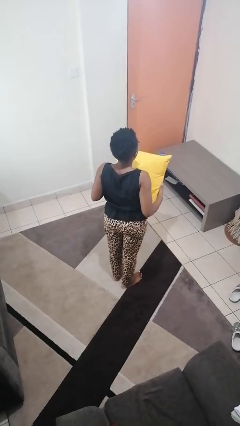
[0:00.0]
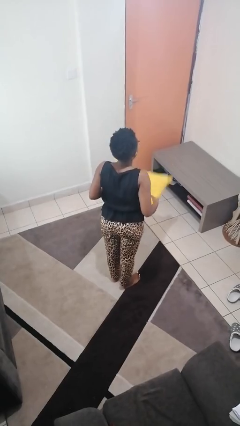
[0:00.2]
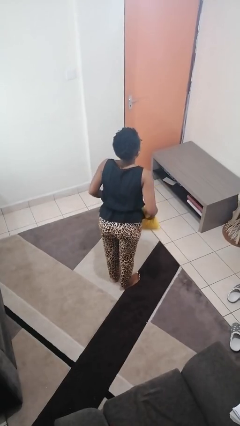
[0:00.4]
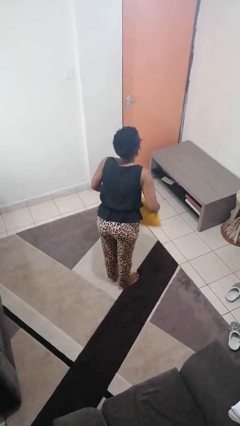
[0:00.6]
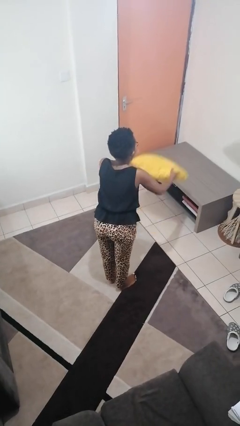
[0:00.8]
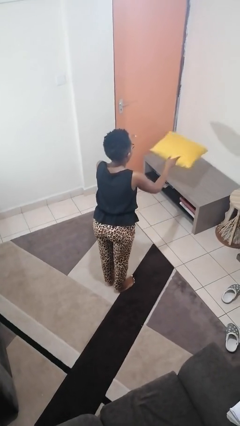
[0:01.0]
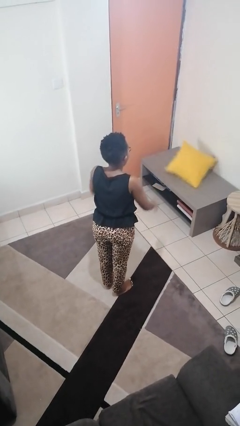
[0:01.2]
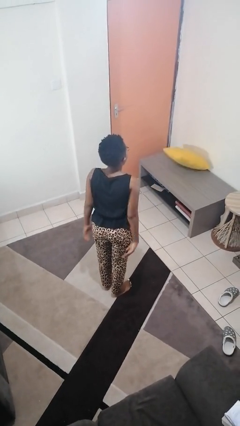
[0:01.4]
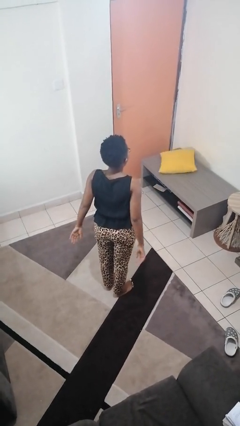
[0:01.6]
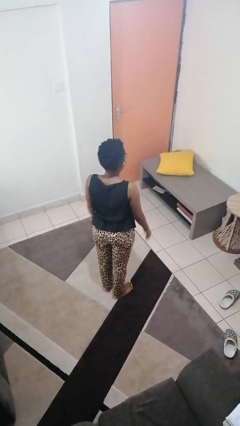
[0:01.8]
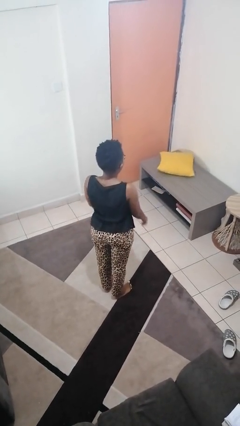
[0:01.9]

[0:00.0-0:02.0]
person throws object on table

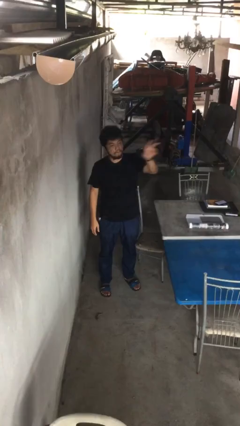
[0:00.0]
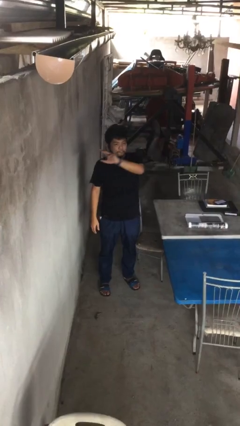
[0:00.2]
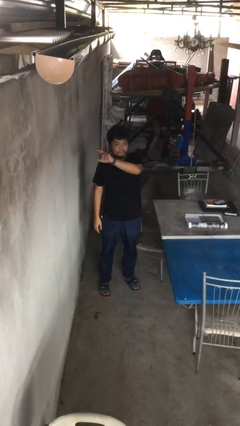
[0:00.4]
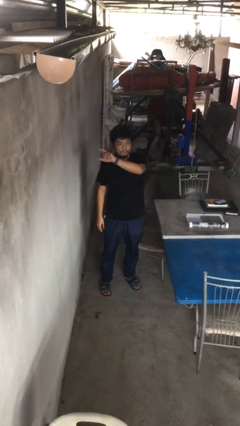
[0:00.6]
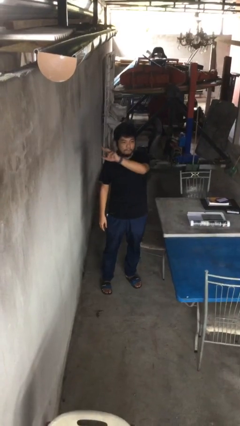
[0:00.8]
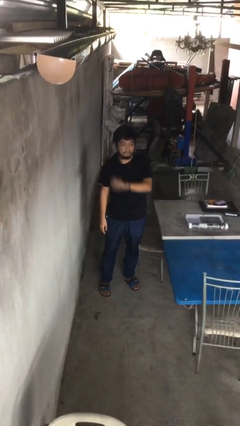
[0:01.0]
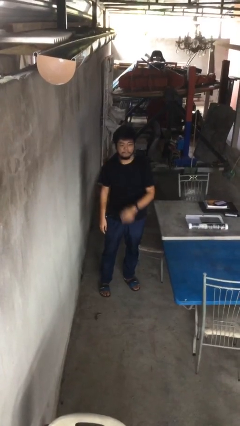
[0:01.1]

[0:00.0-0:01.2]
person gestures swipe right

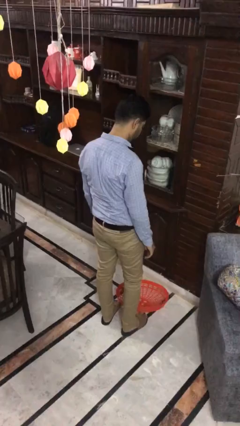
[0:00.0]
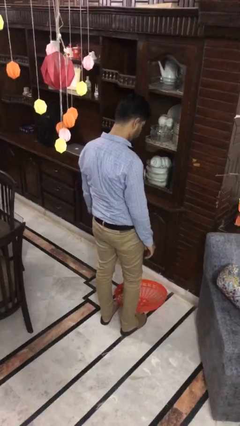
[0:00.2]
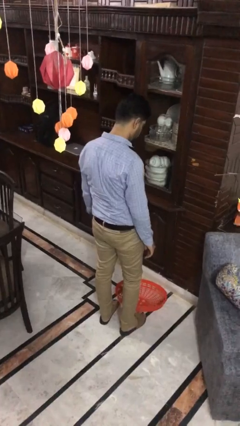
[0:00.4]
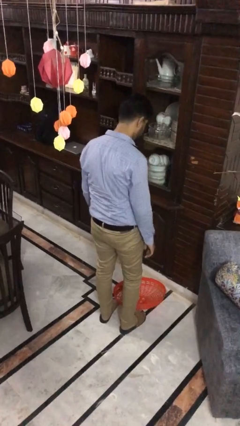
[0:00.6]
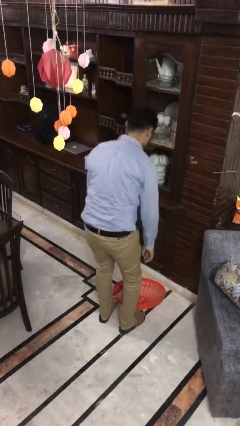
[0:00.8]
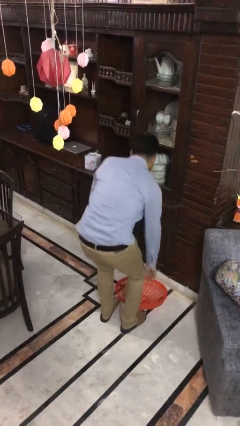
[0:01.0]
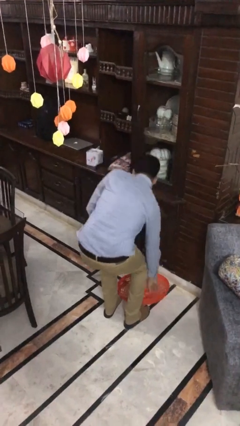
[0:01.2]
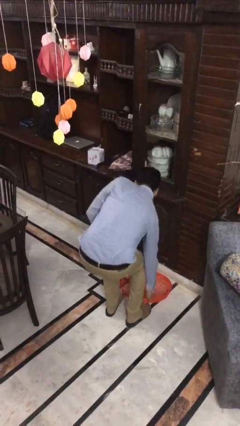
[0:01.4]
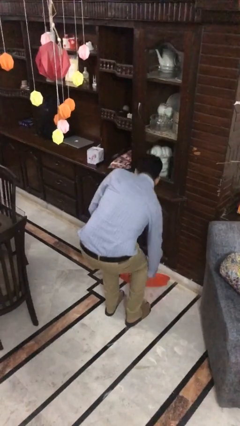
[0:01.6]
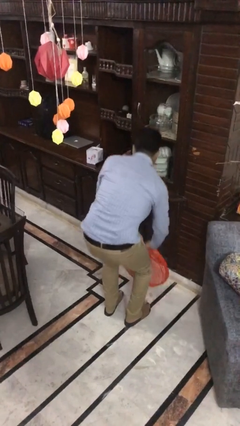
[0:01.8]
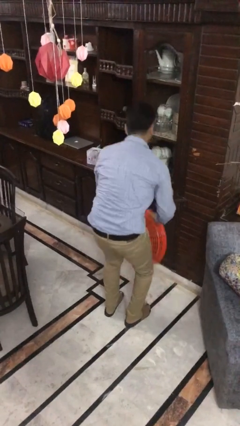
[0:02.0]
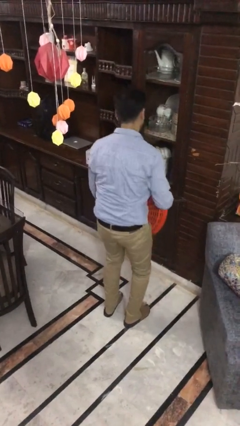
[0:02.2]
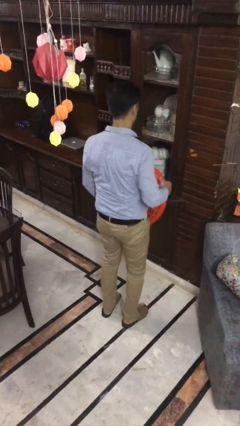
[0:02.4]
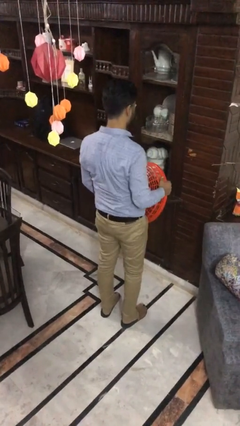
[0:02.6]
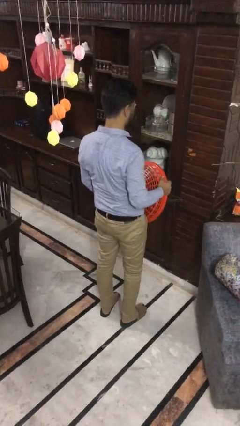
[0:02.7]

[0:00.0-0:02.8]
person picks up object from floor

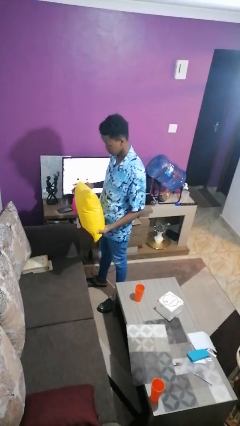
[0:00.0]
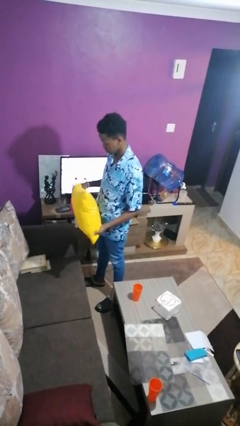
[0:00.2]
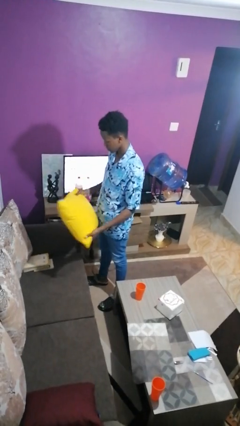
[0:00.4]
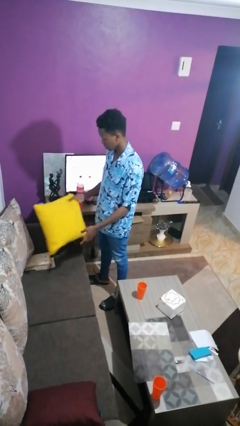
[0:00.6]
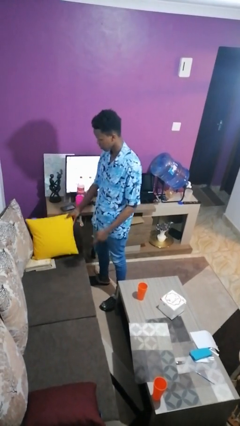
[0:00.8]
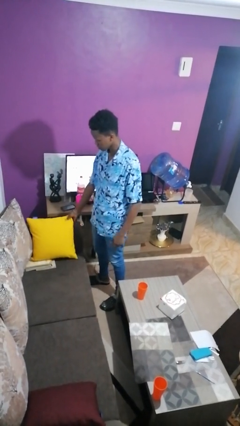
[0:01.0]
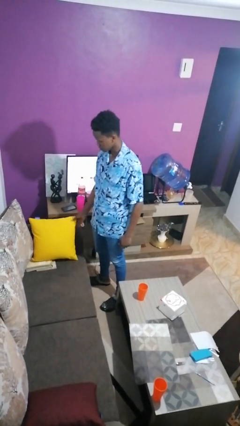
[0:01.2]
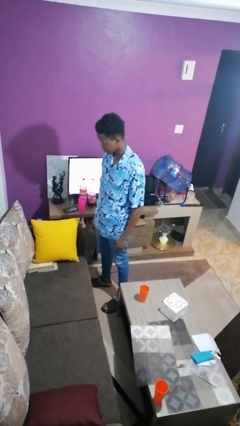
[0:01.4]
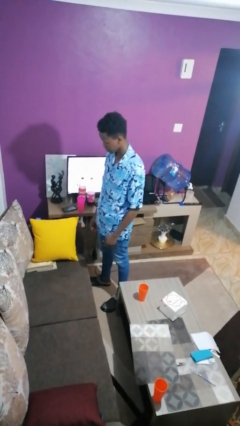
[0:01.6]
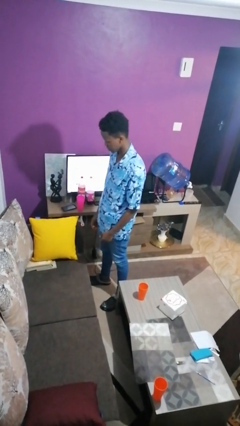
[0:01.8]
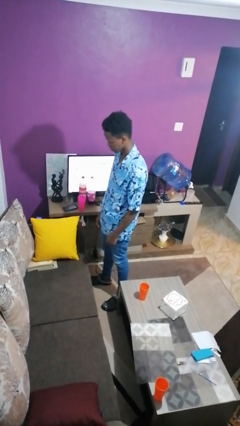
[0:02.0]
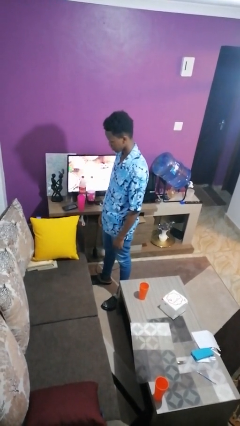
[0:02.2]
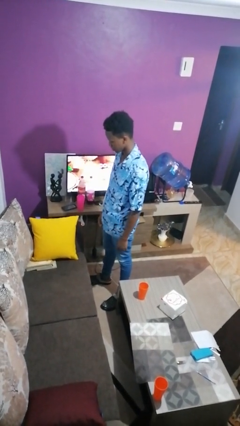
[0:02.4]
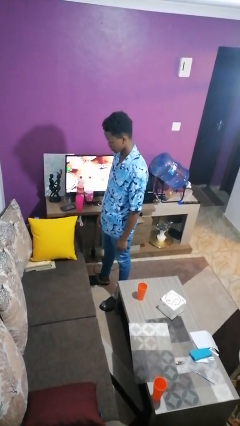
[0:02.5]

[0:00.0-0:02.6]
person puts down object on couch

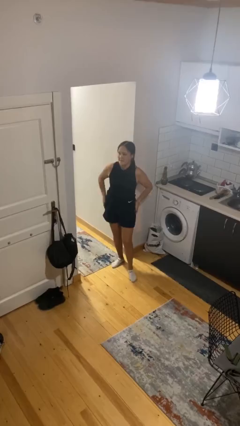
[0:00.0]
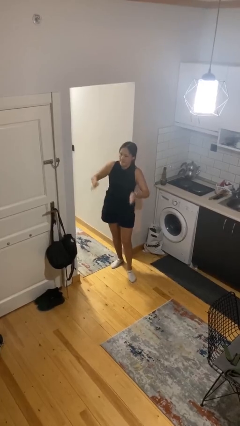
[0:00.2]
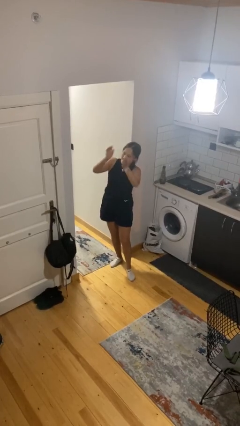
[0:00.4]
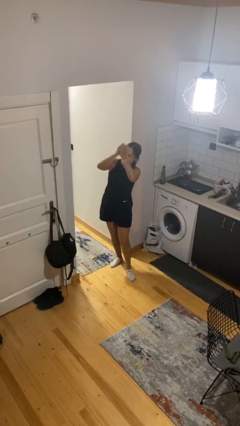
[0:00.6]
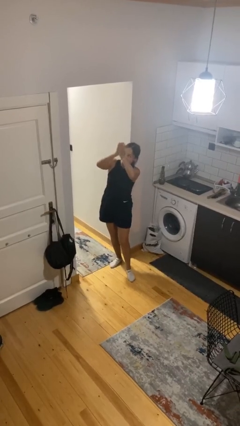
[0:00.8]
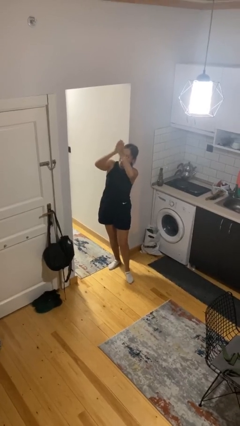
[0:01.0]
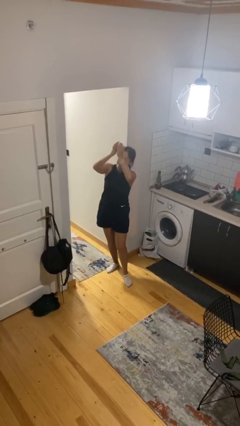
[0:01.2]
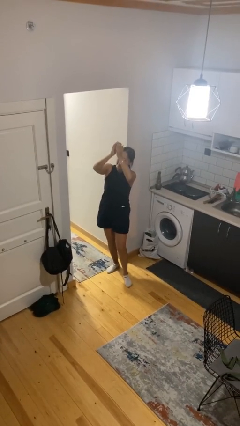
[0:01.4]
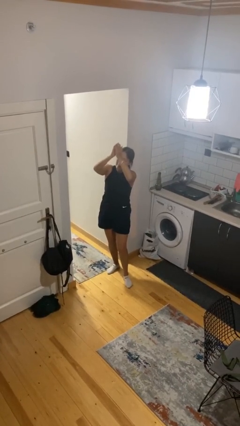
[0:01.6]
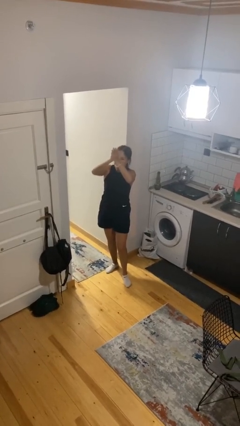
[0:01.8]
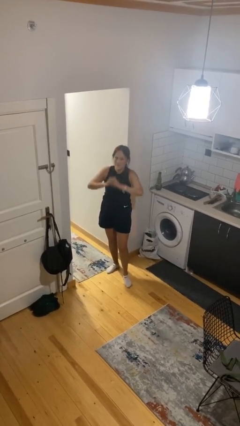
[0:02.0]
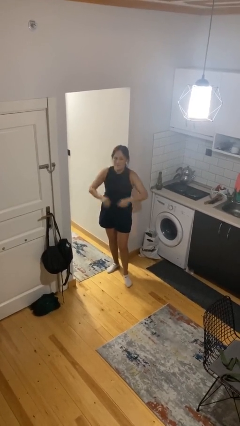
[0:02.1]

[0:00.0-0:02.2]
person claps hands

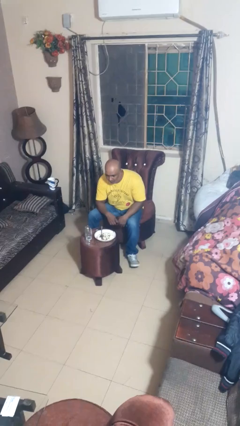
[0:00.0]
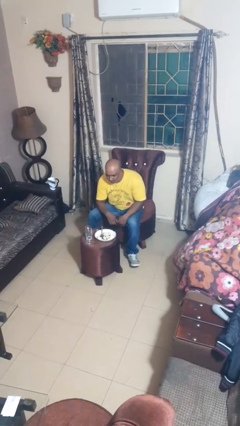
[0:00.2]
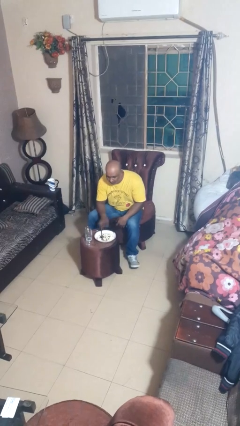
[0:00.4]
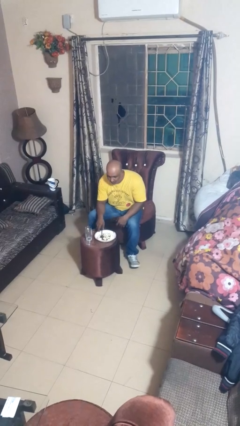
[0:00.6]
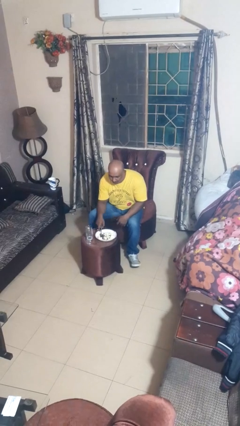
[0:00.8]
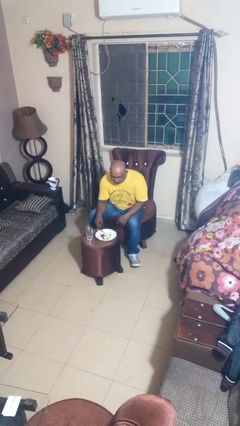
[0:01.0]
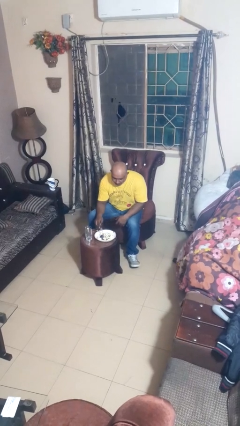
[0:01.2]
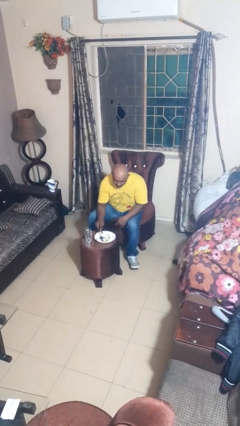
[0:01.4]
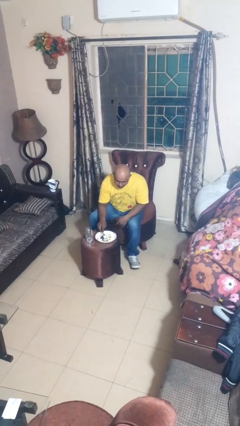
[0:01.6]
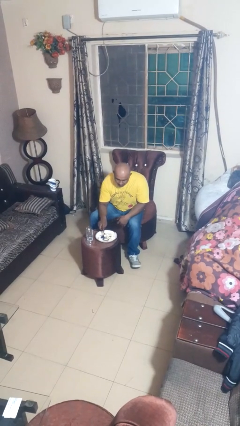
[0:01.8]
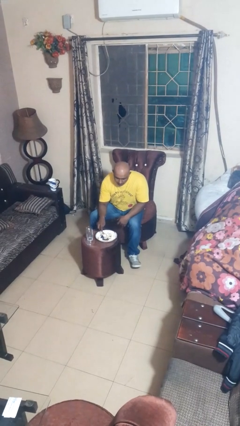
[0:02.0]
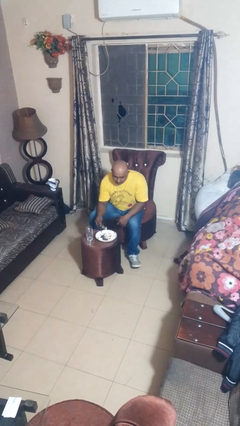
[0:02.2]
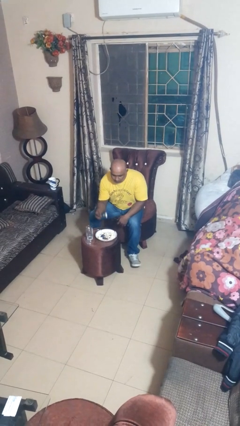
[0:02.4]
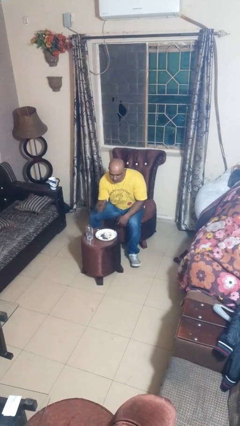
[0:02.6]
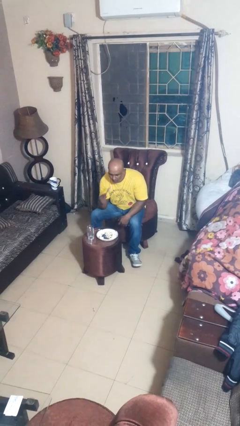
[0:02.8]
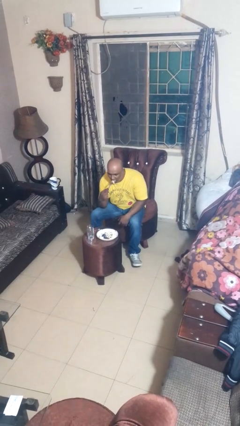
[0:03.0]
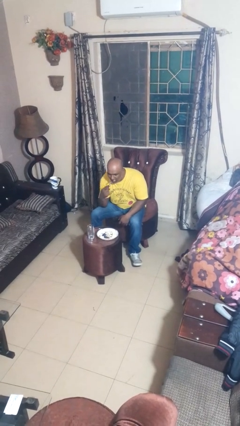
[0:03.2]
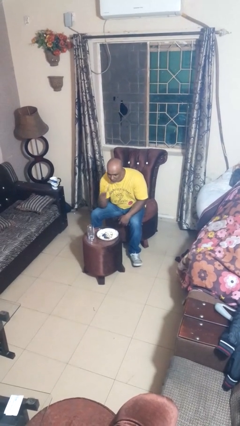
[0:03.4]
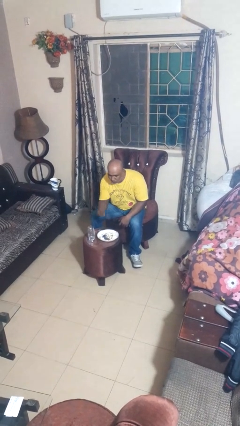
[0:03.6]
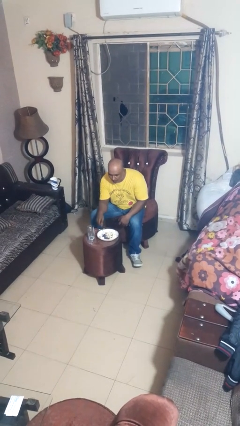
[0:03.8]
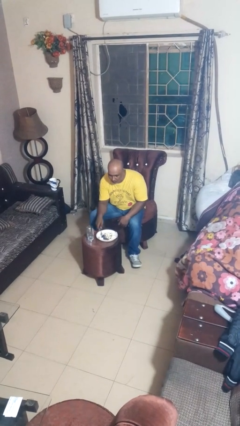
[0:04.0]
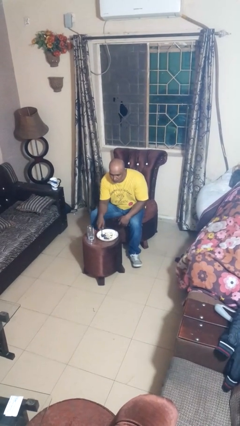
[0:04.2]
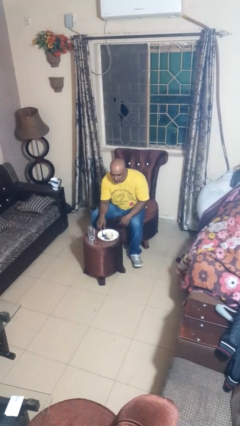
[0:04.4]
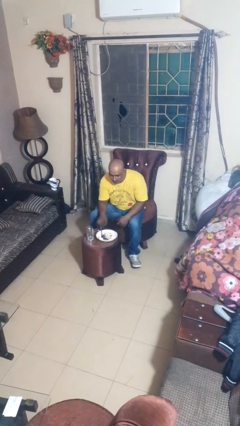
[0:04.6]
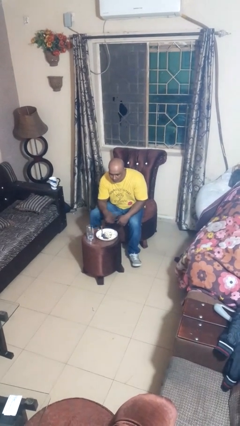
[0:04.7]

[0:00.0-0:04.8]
person eats with utensil

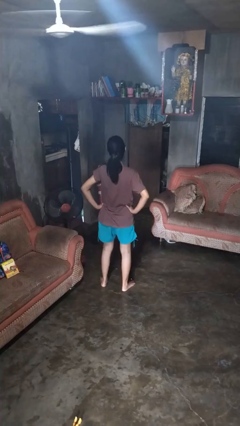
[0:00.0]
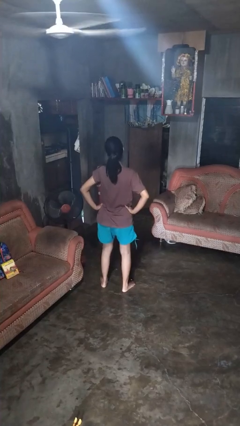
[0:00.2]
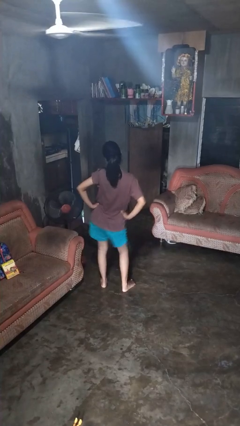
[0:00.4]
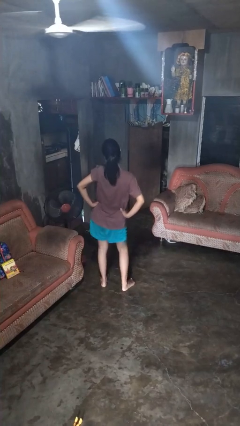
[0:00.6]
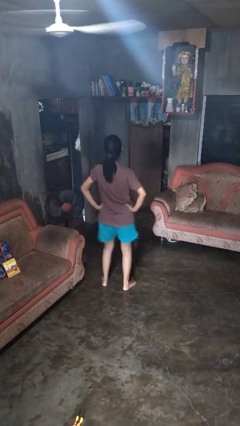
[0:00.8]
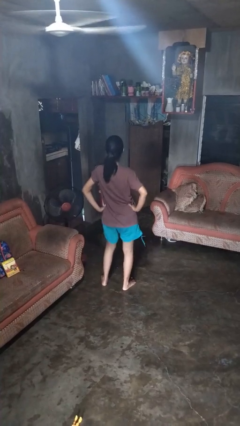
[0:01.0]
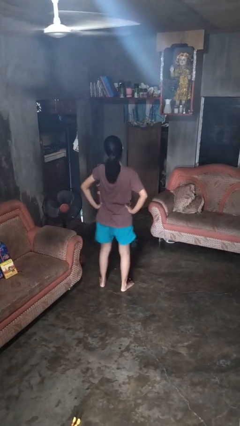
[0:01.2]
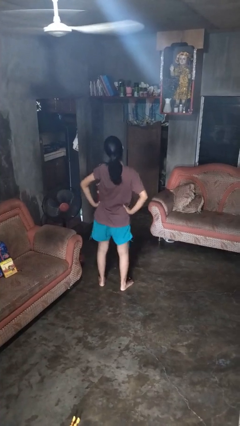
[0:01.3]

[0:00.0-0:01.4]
person dances in place

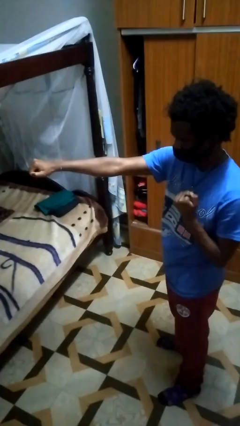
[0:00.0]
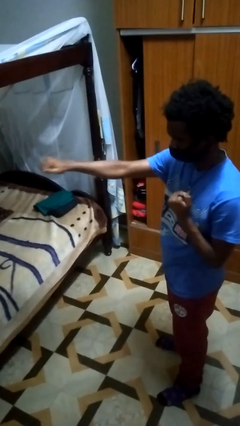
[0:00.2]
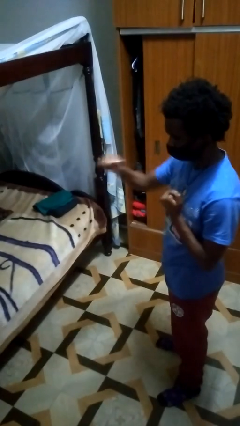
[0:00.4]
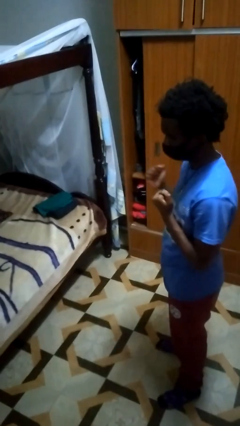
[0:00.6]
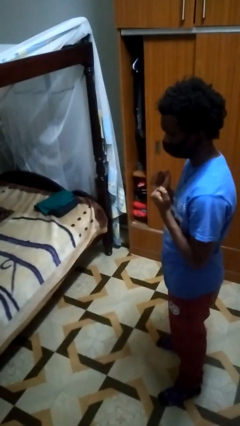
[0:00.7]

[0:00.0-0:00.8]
person punches
